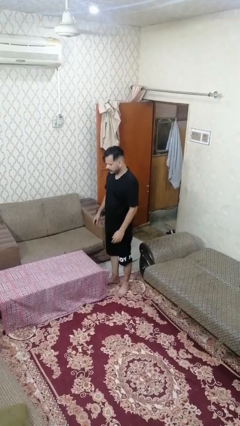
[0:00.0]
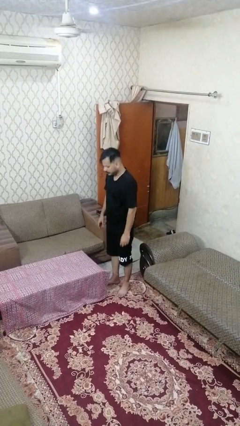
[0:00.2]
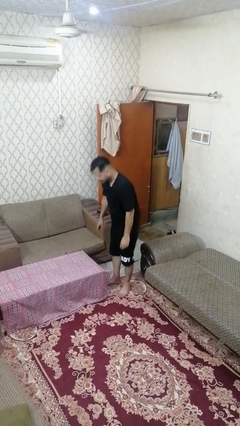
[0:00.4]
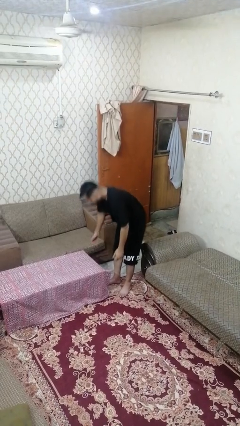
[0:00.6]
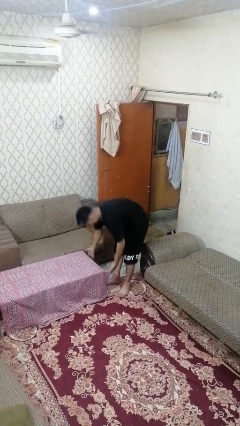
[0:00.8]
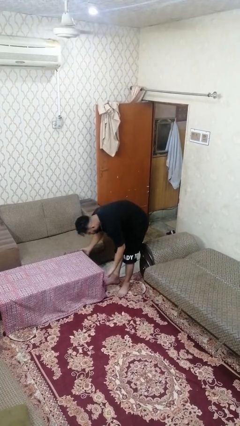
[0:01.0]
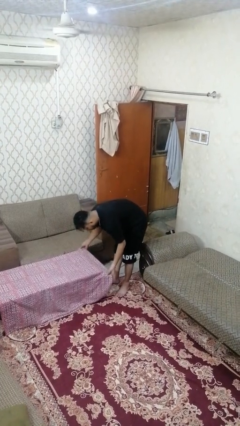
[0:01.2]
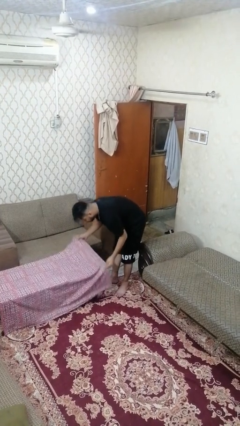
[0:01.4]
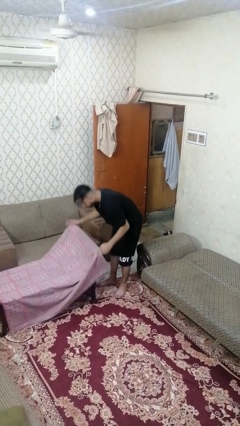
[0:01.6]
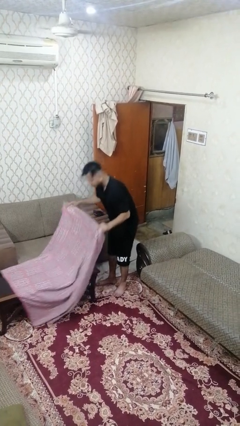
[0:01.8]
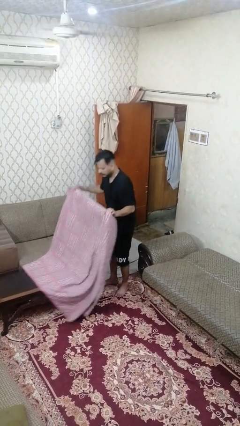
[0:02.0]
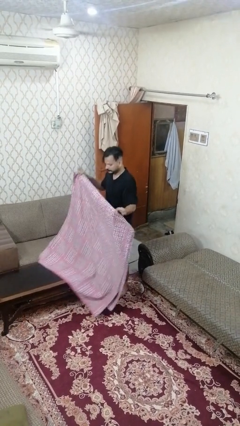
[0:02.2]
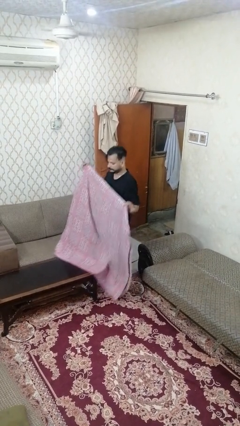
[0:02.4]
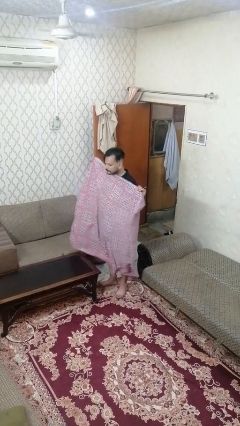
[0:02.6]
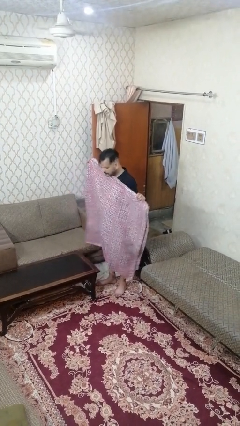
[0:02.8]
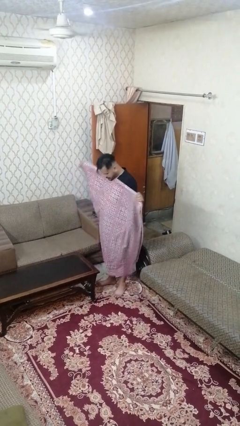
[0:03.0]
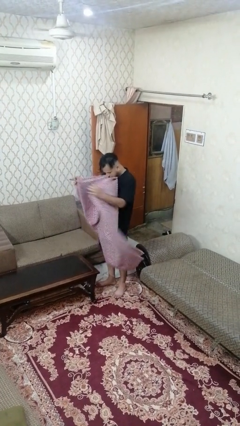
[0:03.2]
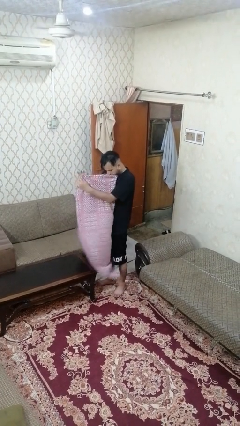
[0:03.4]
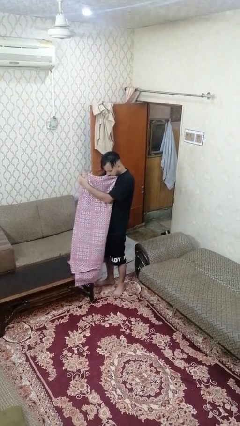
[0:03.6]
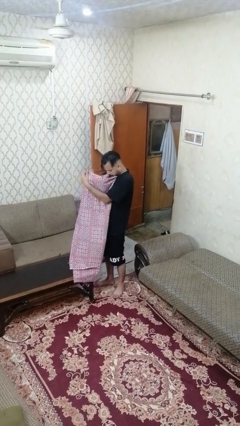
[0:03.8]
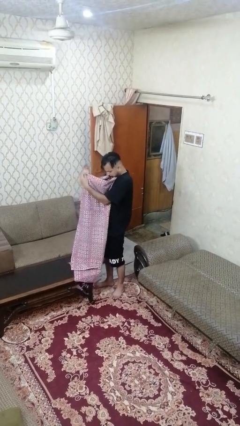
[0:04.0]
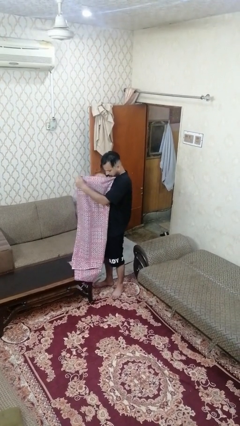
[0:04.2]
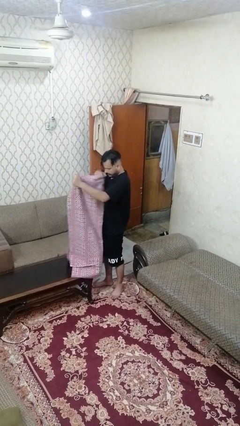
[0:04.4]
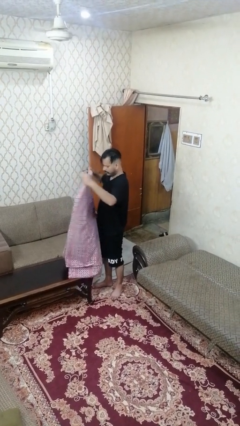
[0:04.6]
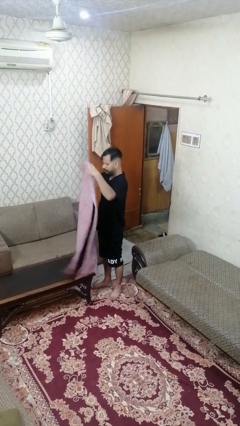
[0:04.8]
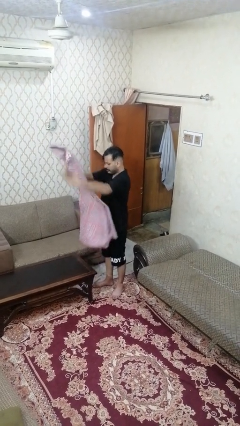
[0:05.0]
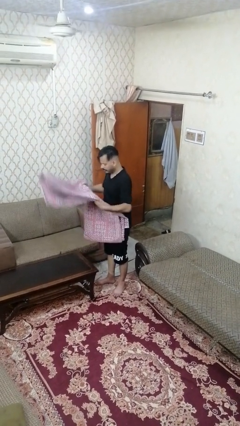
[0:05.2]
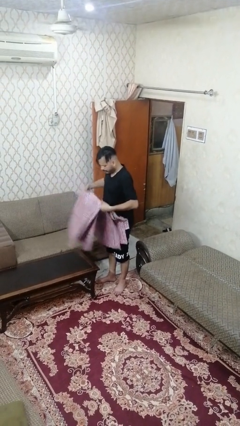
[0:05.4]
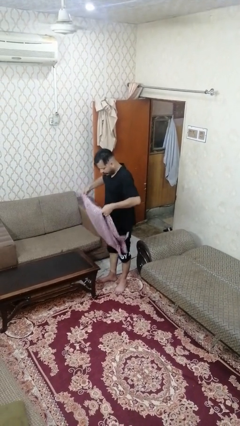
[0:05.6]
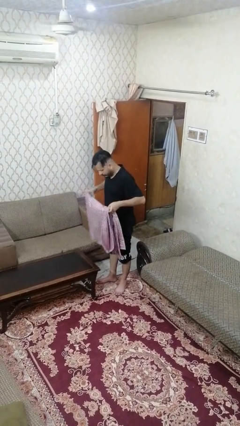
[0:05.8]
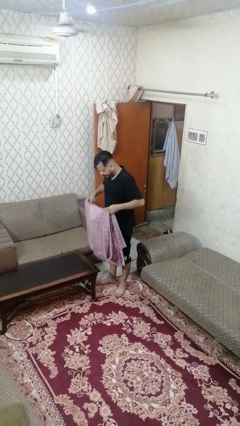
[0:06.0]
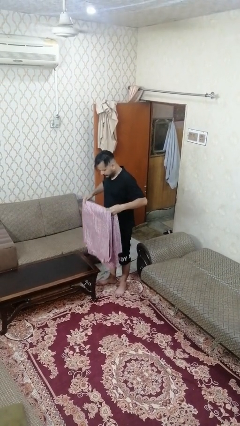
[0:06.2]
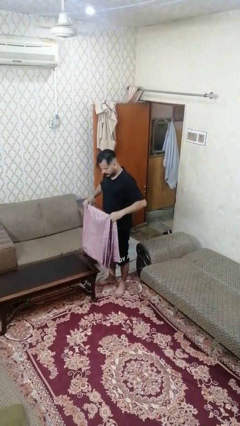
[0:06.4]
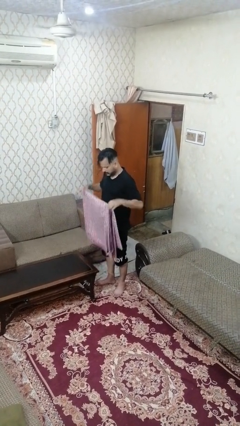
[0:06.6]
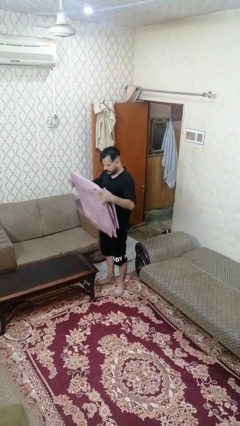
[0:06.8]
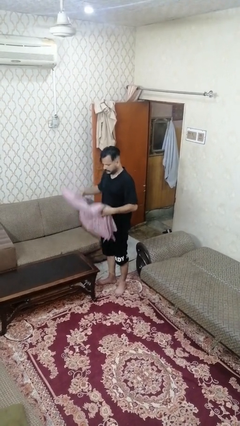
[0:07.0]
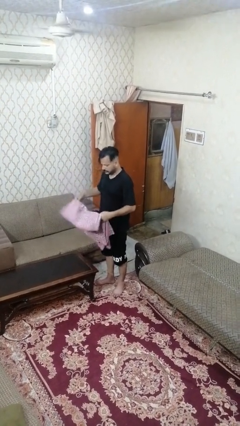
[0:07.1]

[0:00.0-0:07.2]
person folds tablecloth

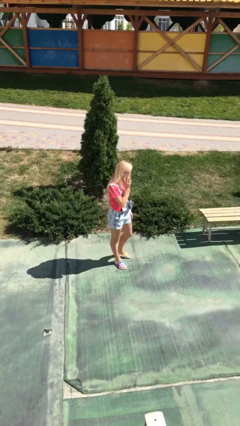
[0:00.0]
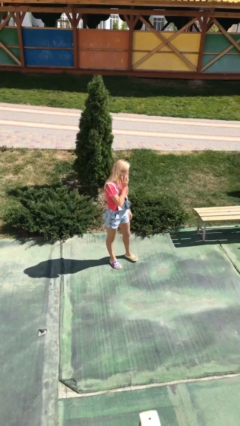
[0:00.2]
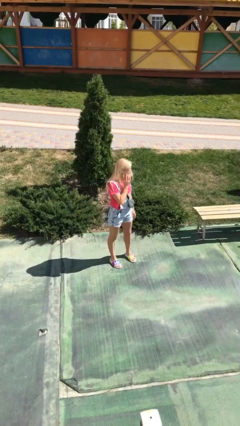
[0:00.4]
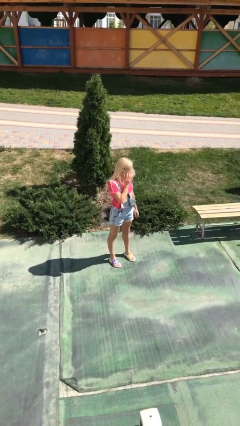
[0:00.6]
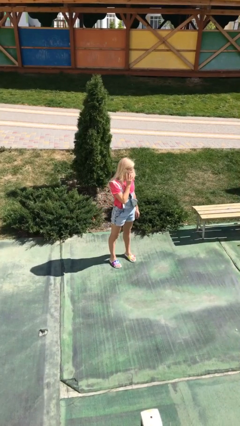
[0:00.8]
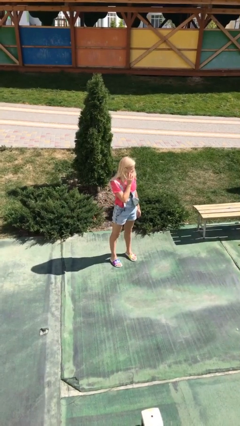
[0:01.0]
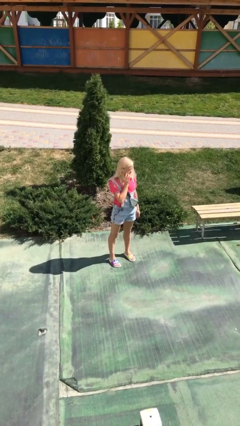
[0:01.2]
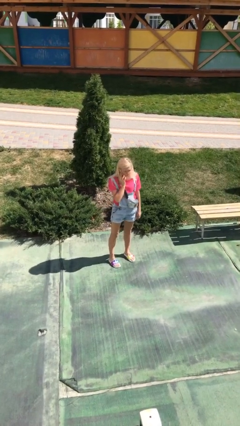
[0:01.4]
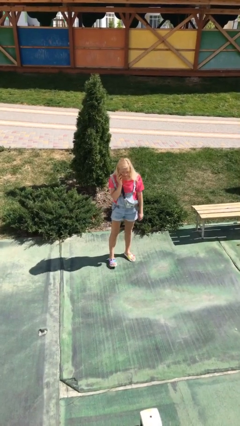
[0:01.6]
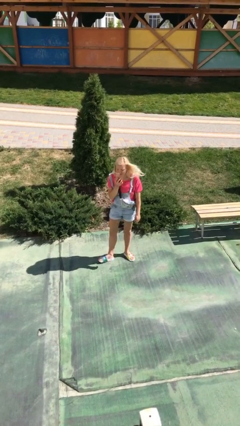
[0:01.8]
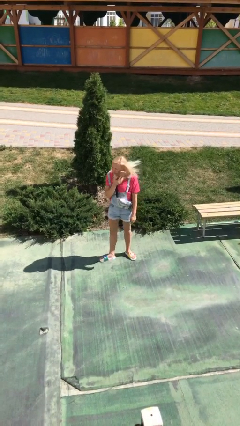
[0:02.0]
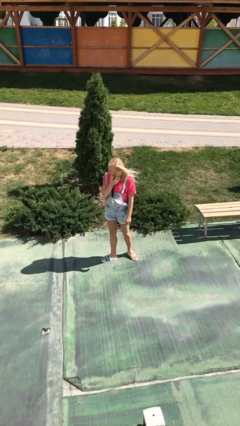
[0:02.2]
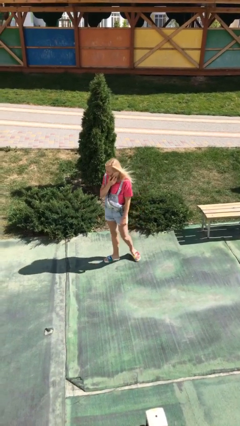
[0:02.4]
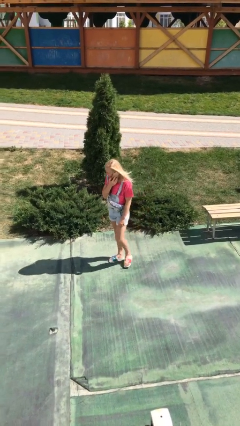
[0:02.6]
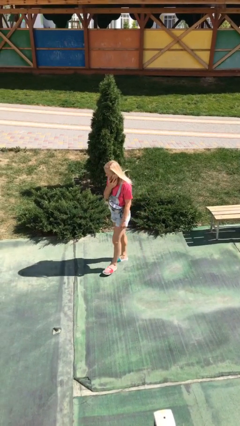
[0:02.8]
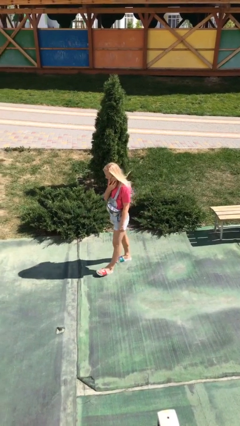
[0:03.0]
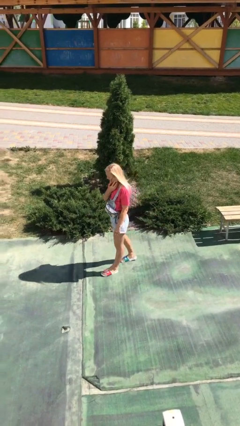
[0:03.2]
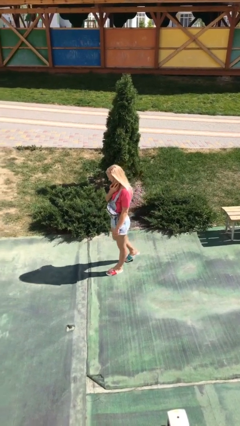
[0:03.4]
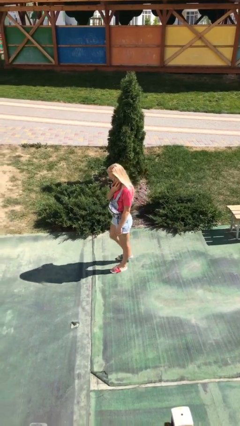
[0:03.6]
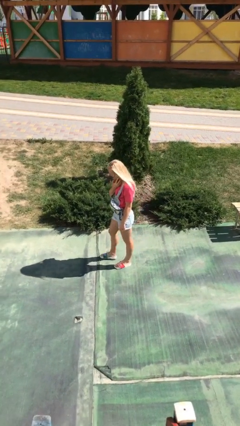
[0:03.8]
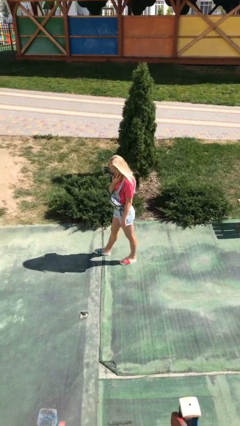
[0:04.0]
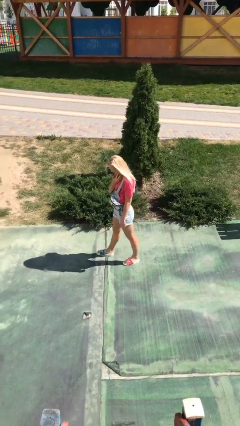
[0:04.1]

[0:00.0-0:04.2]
person talks on phone

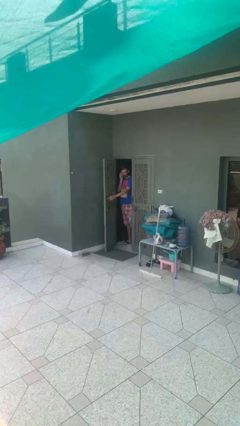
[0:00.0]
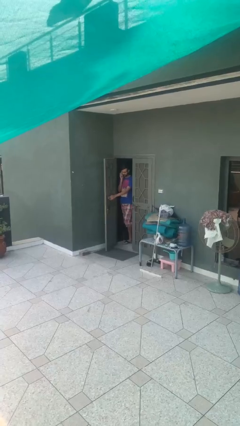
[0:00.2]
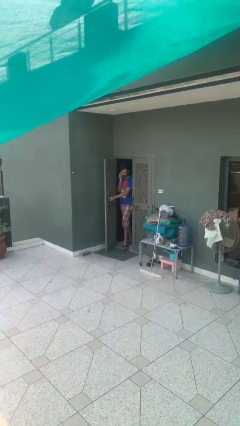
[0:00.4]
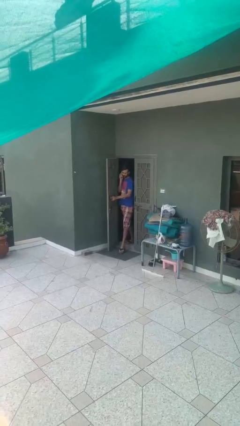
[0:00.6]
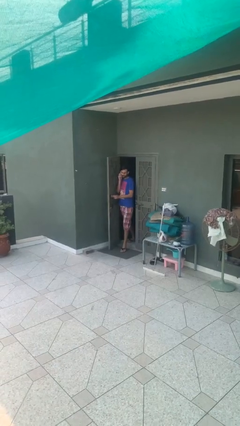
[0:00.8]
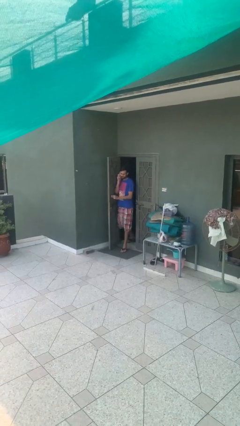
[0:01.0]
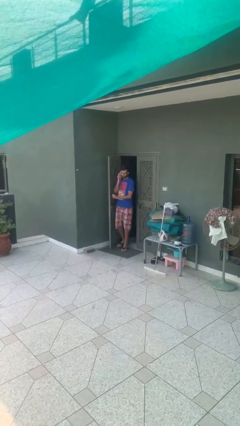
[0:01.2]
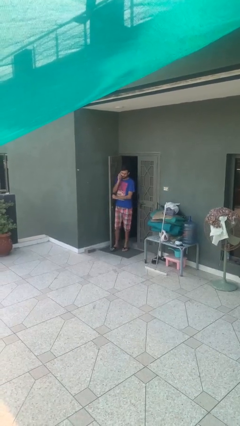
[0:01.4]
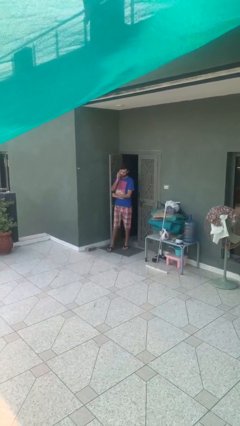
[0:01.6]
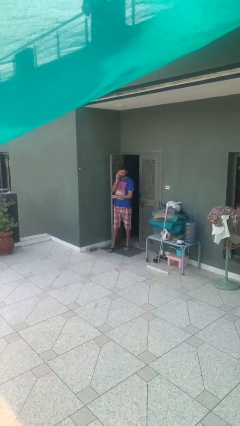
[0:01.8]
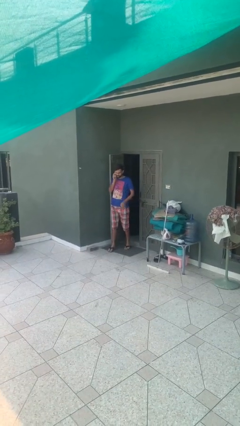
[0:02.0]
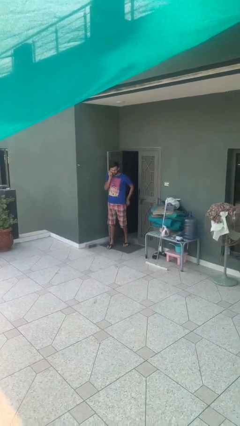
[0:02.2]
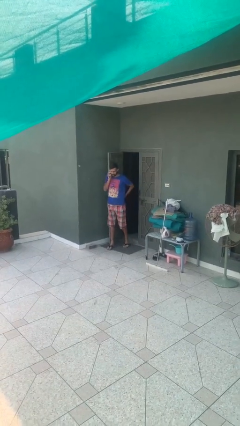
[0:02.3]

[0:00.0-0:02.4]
person enters scene through structure

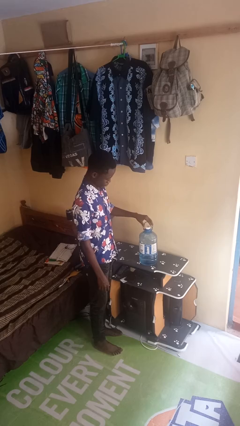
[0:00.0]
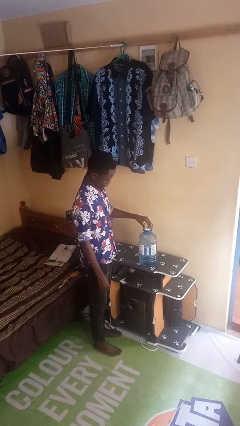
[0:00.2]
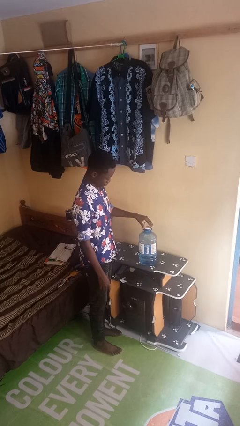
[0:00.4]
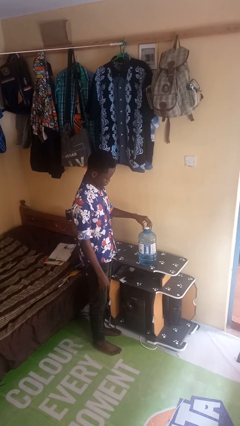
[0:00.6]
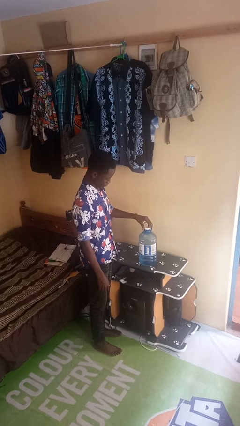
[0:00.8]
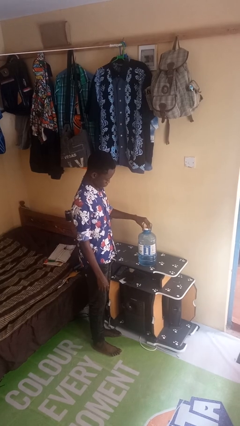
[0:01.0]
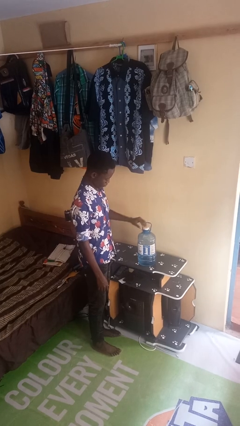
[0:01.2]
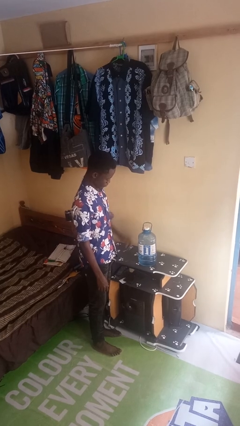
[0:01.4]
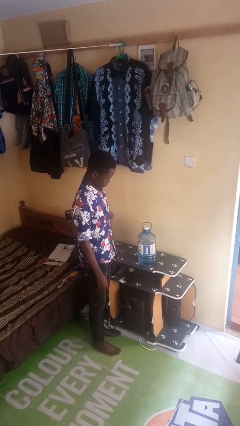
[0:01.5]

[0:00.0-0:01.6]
person screws lid to bottle

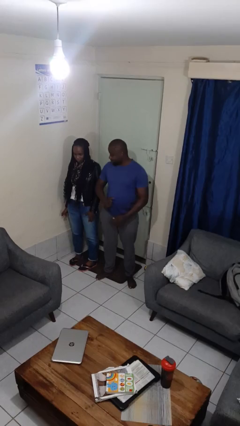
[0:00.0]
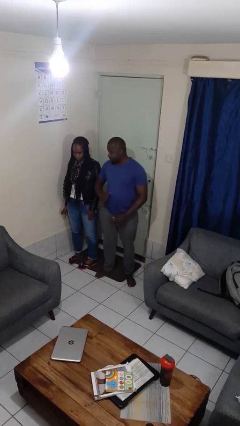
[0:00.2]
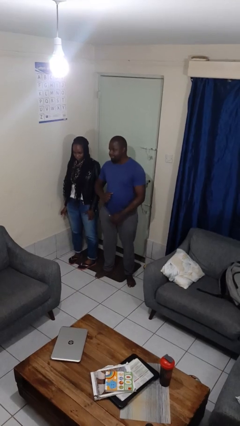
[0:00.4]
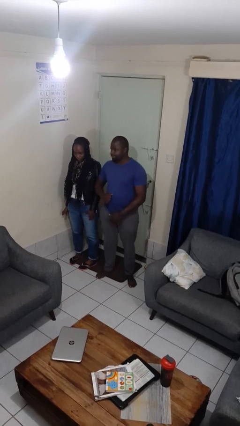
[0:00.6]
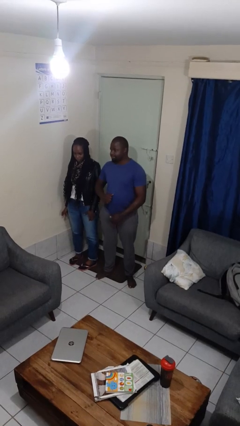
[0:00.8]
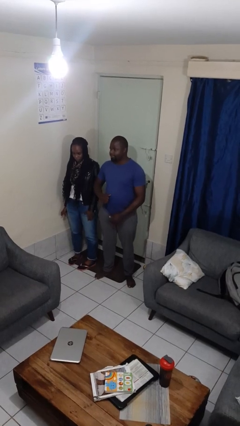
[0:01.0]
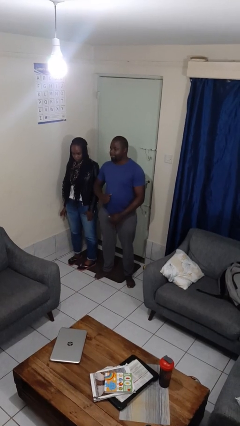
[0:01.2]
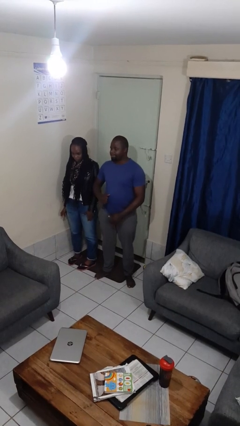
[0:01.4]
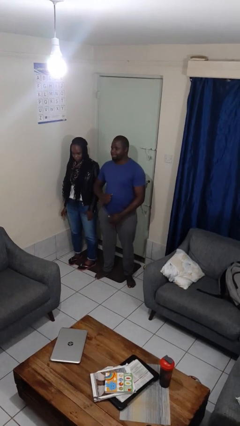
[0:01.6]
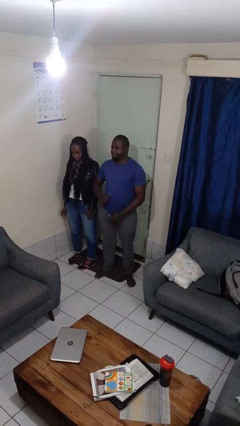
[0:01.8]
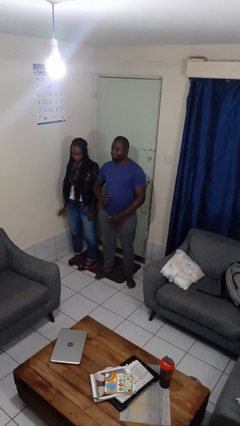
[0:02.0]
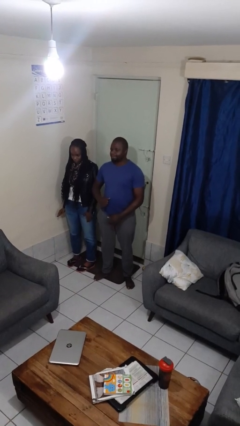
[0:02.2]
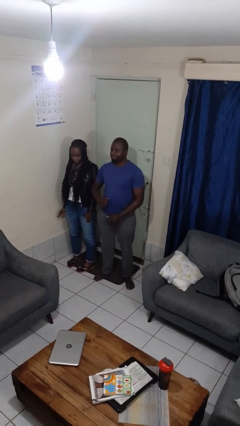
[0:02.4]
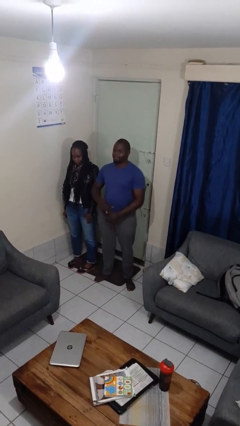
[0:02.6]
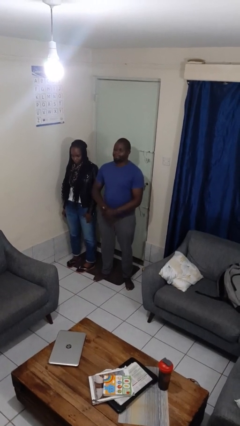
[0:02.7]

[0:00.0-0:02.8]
person nudges person with elbow
